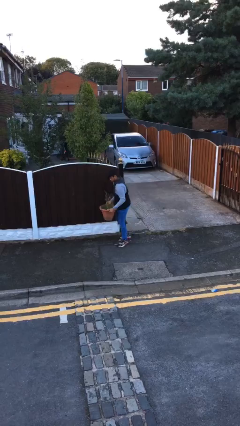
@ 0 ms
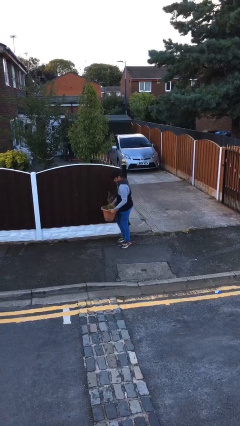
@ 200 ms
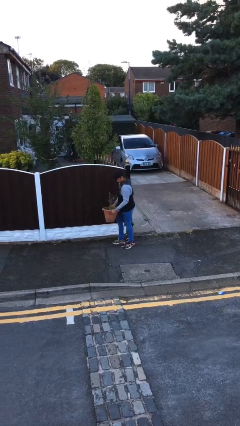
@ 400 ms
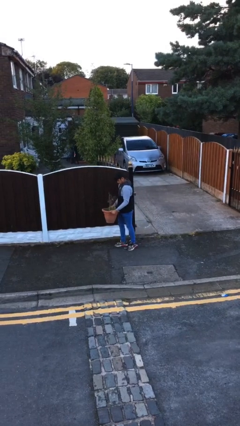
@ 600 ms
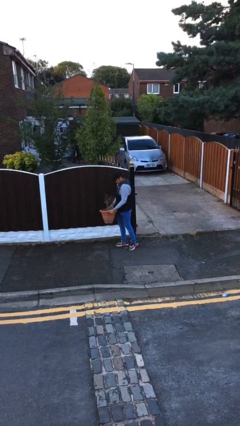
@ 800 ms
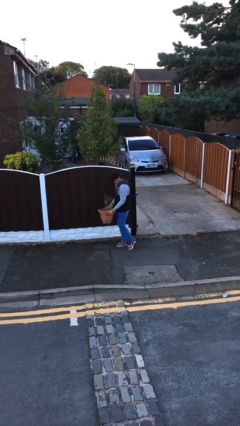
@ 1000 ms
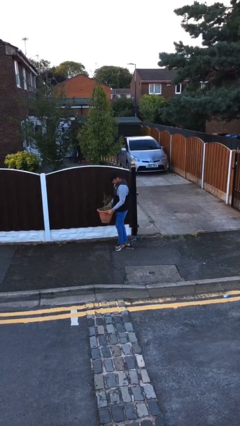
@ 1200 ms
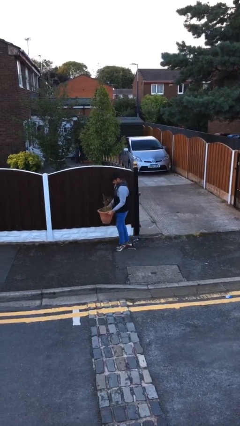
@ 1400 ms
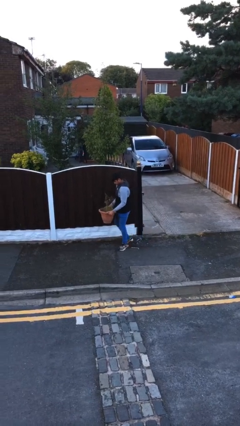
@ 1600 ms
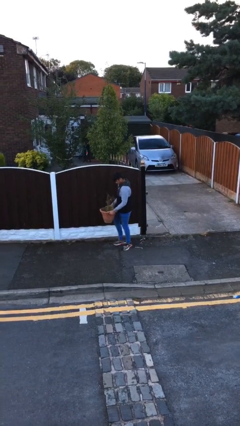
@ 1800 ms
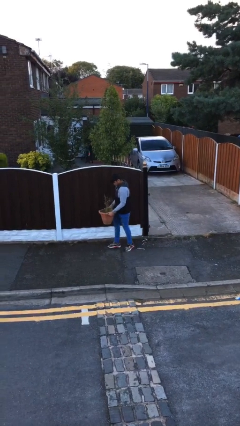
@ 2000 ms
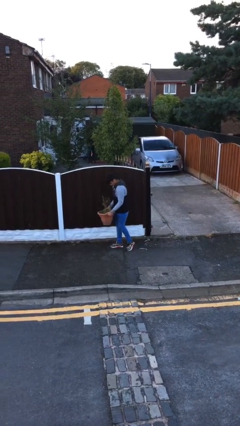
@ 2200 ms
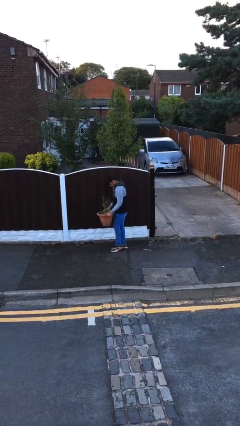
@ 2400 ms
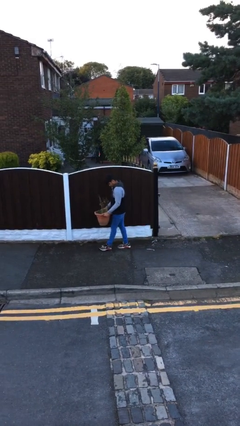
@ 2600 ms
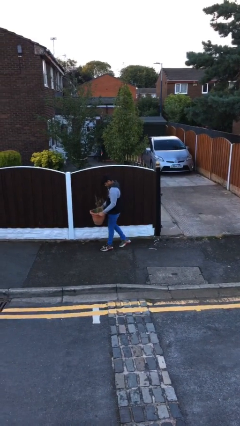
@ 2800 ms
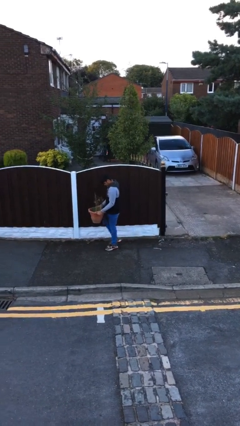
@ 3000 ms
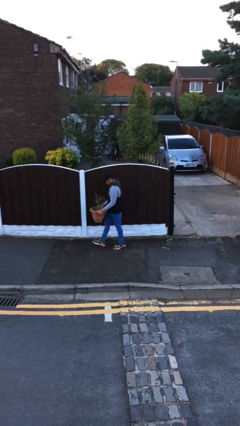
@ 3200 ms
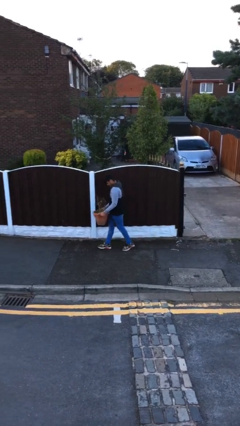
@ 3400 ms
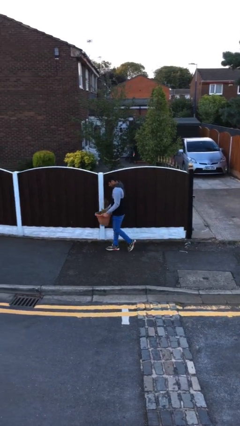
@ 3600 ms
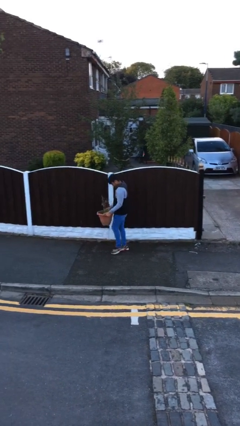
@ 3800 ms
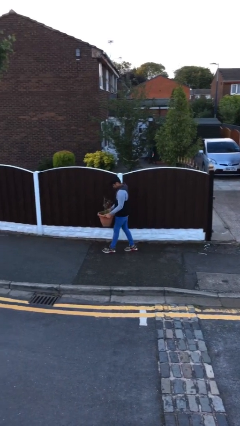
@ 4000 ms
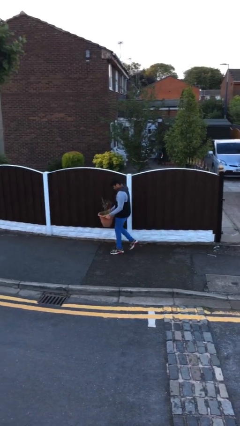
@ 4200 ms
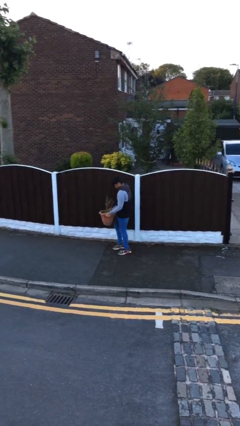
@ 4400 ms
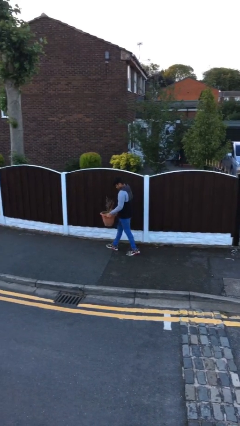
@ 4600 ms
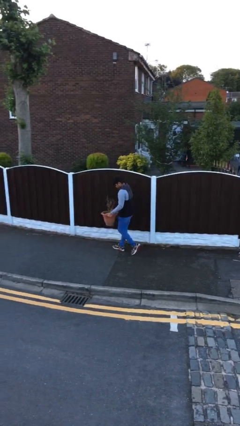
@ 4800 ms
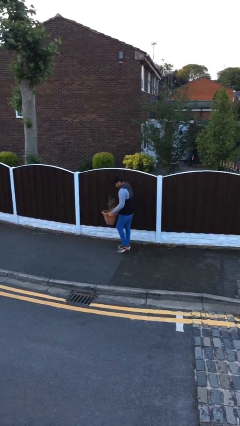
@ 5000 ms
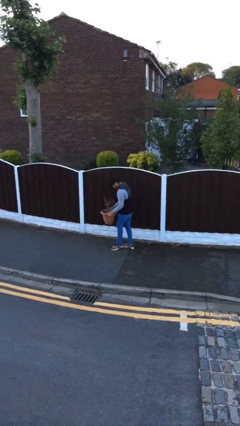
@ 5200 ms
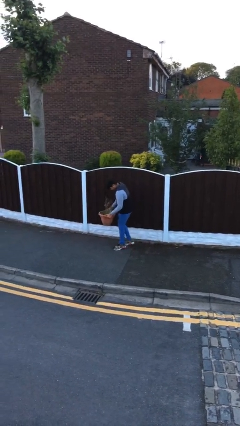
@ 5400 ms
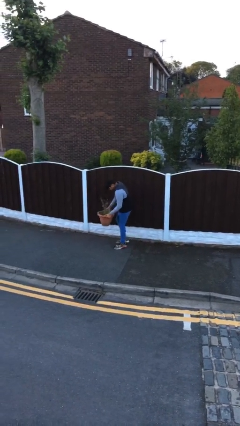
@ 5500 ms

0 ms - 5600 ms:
person carries heavy object

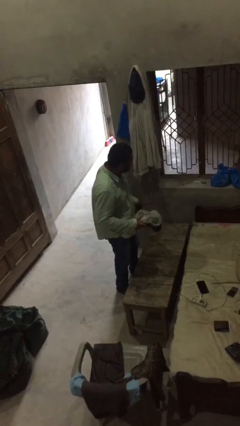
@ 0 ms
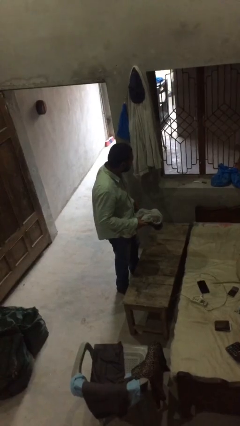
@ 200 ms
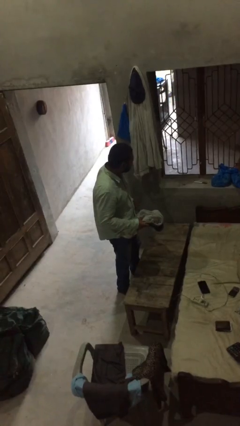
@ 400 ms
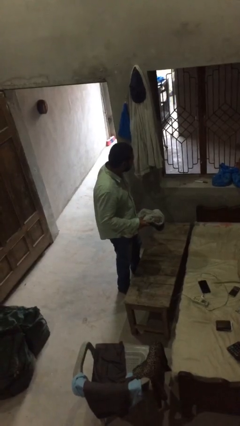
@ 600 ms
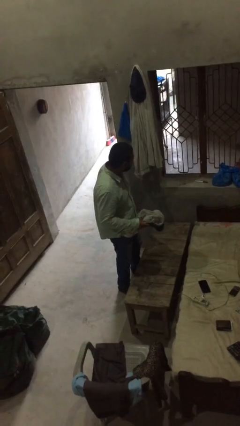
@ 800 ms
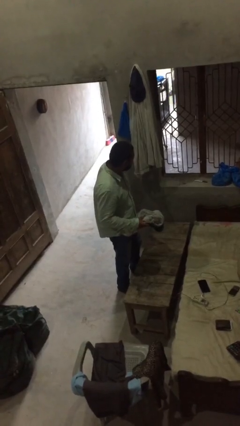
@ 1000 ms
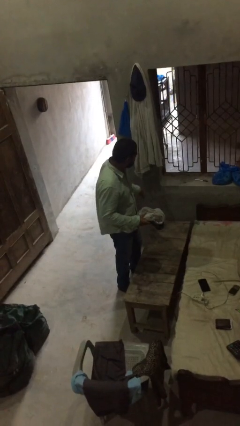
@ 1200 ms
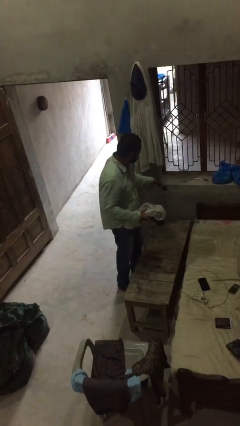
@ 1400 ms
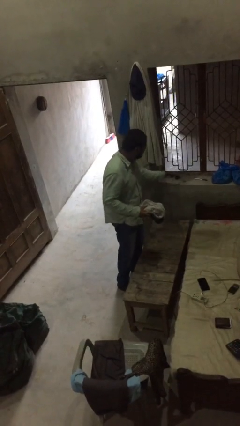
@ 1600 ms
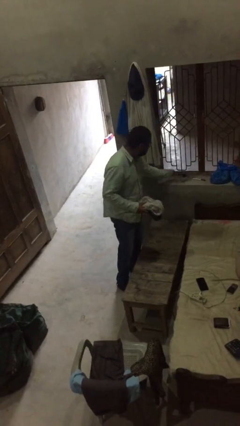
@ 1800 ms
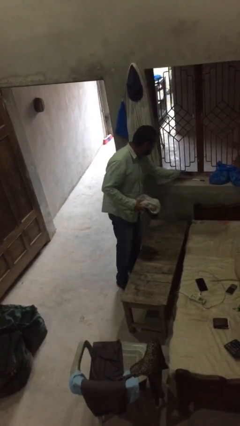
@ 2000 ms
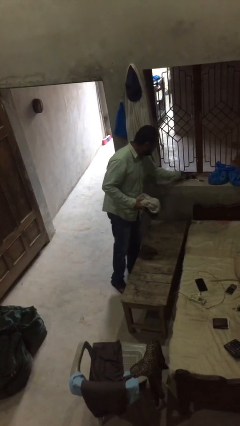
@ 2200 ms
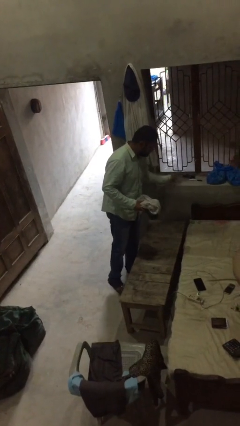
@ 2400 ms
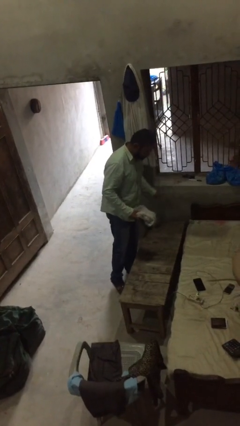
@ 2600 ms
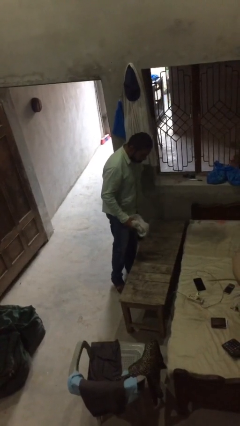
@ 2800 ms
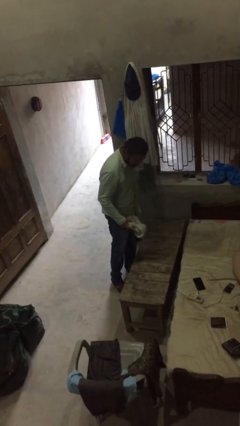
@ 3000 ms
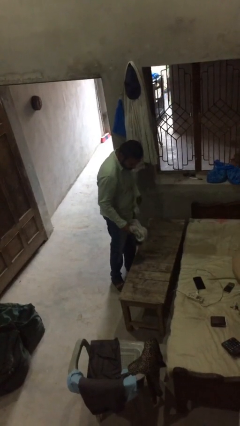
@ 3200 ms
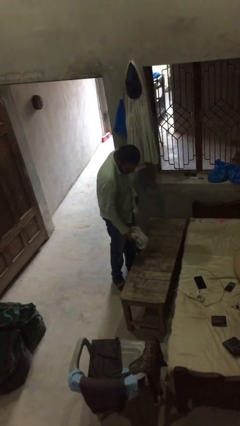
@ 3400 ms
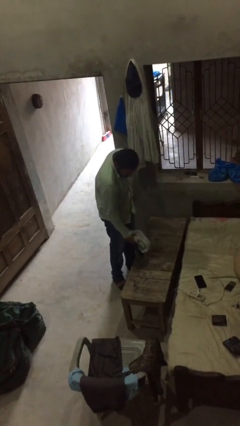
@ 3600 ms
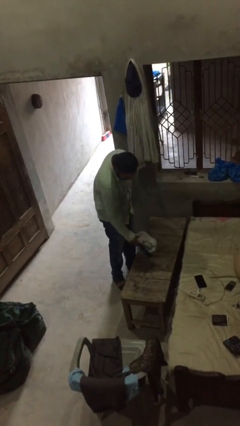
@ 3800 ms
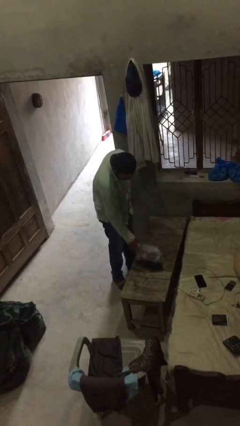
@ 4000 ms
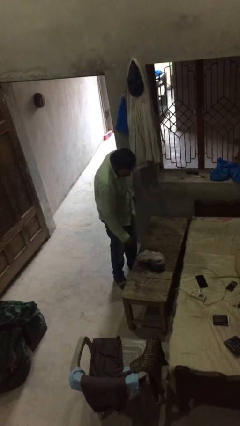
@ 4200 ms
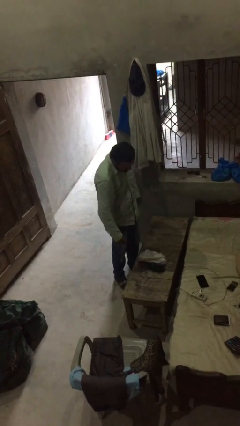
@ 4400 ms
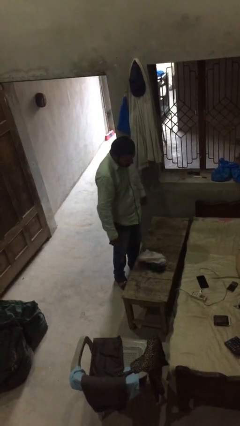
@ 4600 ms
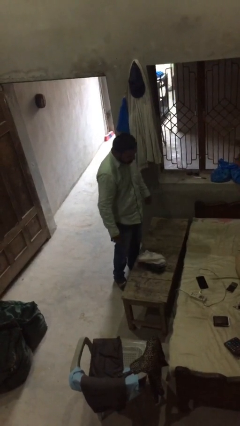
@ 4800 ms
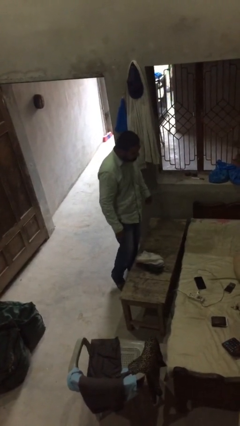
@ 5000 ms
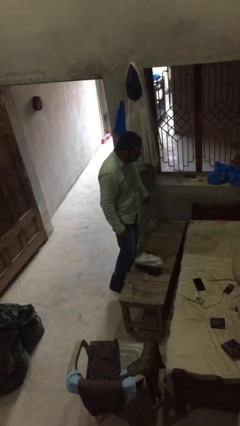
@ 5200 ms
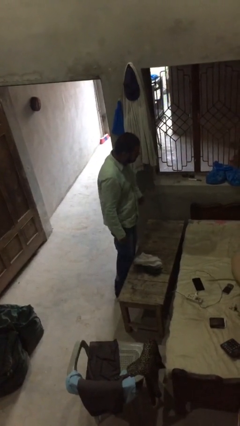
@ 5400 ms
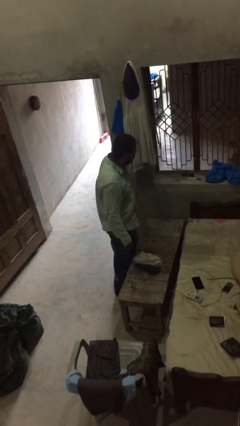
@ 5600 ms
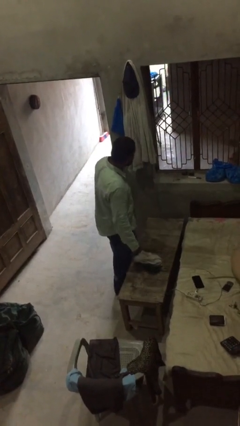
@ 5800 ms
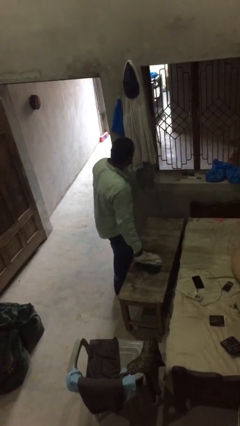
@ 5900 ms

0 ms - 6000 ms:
person puts down object on table

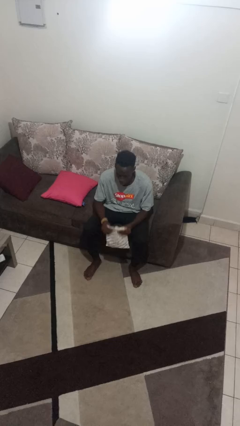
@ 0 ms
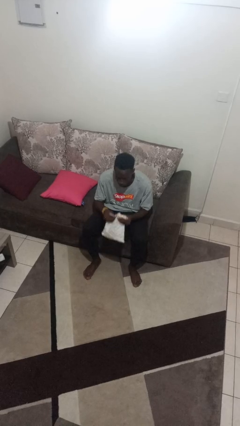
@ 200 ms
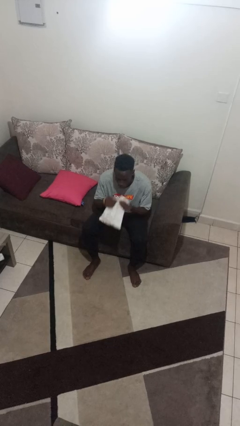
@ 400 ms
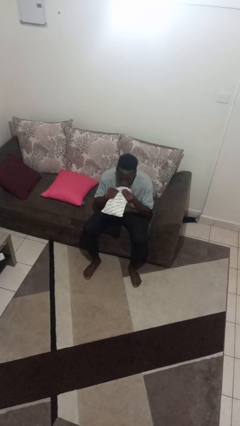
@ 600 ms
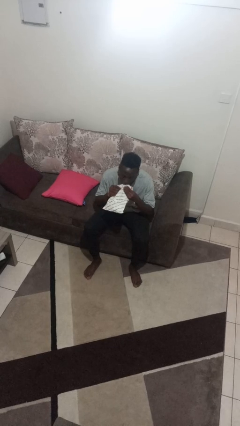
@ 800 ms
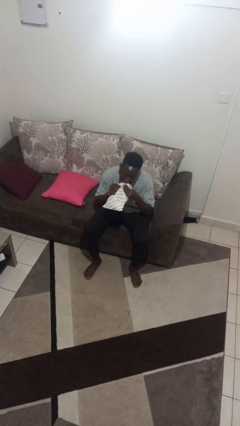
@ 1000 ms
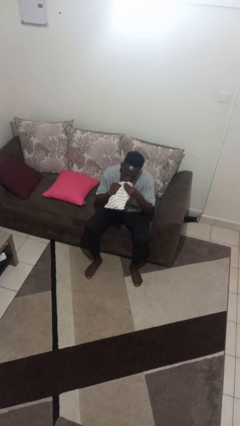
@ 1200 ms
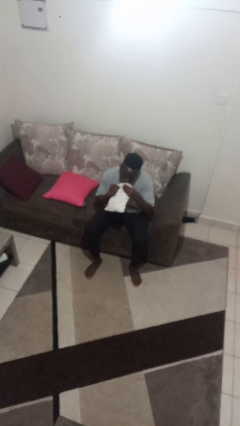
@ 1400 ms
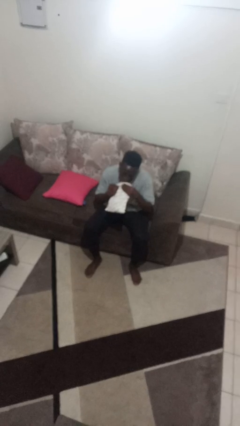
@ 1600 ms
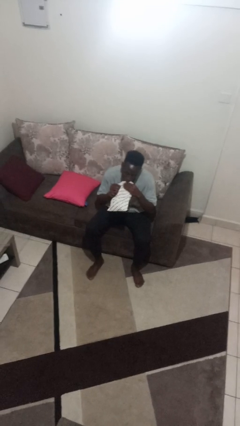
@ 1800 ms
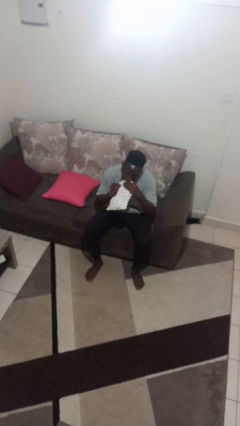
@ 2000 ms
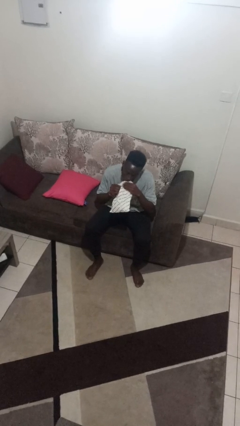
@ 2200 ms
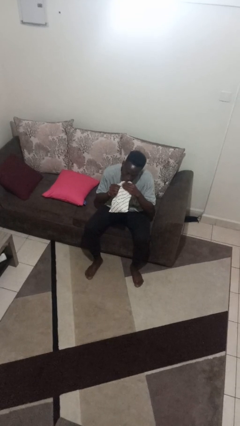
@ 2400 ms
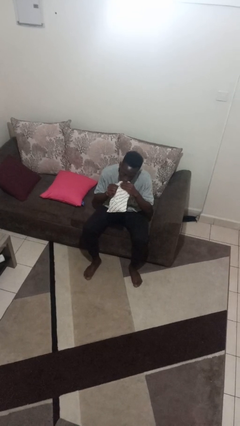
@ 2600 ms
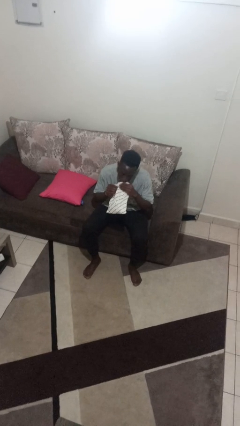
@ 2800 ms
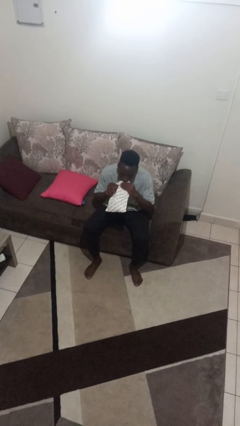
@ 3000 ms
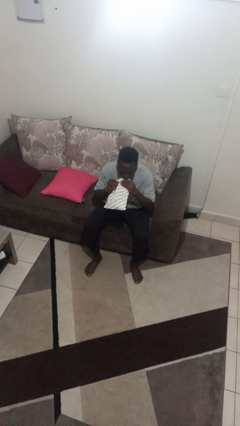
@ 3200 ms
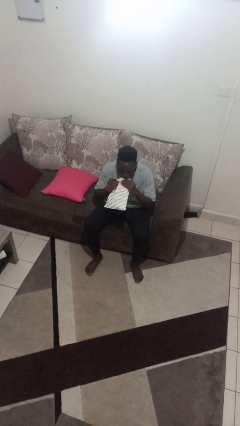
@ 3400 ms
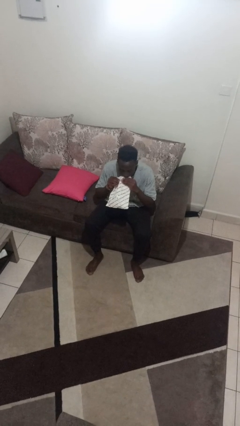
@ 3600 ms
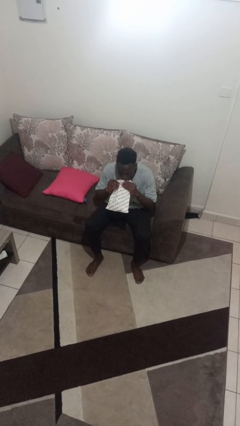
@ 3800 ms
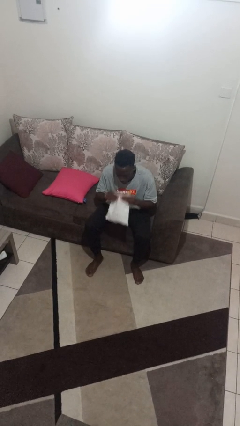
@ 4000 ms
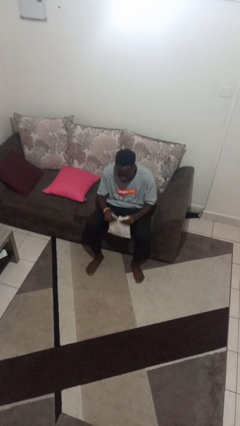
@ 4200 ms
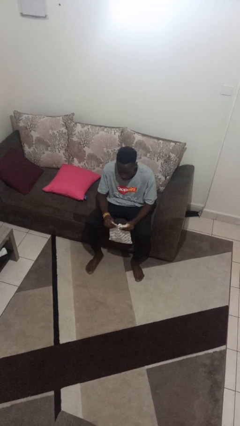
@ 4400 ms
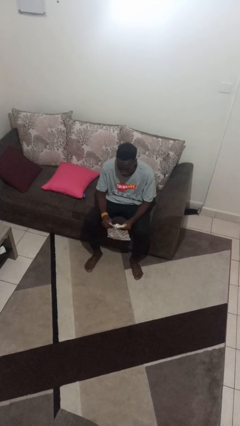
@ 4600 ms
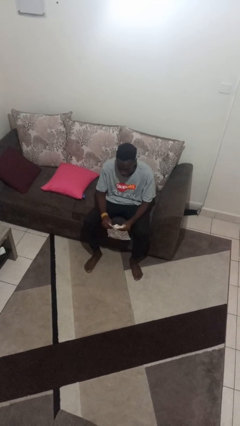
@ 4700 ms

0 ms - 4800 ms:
person eats snack from bag

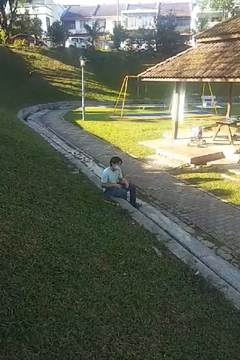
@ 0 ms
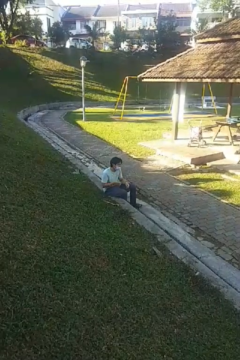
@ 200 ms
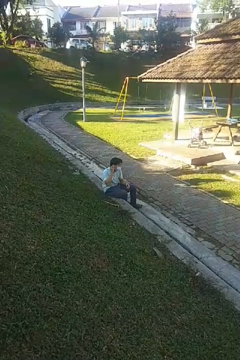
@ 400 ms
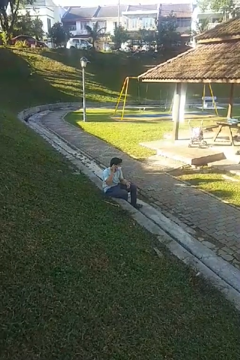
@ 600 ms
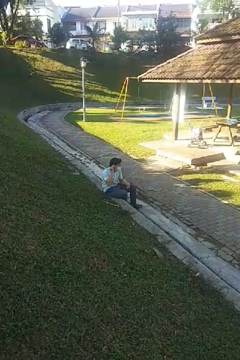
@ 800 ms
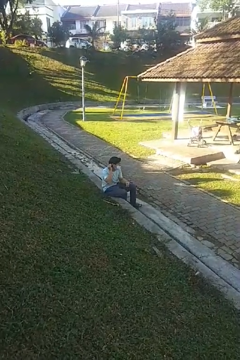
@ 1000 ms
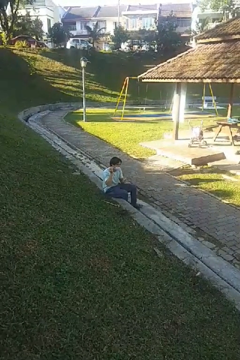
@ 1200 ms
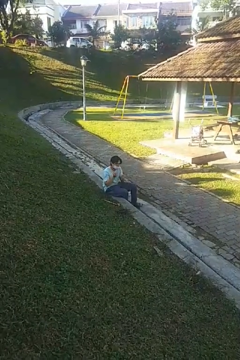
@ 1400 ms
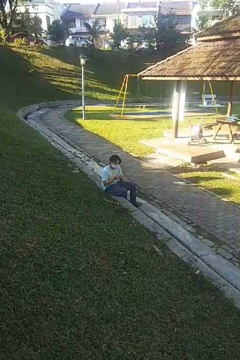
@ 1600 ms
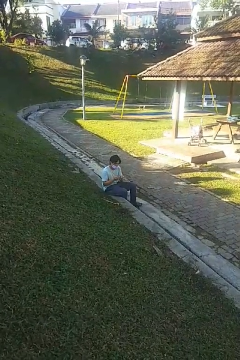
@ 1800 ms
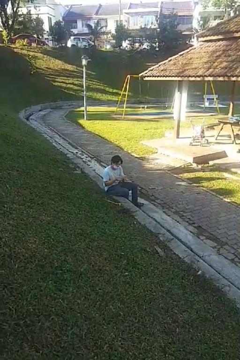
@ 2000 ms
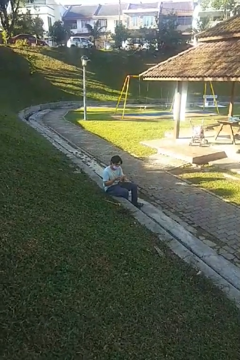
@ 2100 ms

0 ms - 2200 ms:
person takes off earrings
